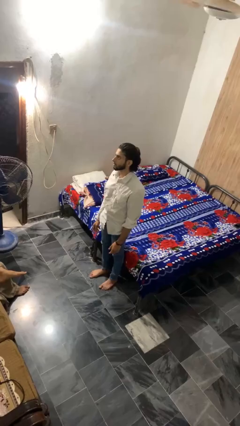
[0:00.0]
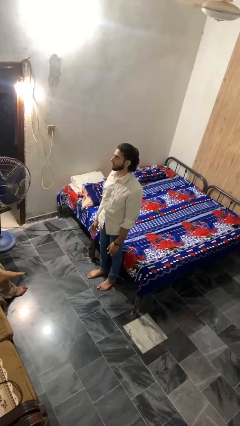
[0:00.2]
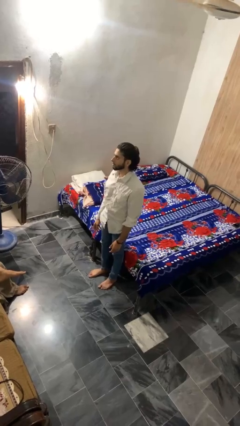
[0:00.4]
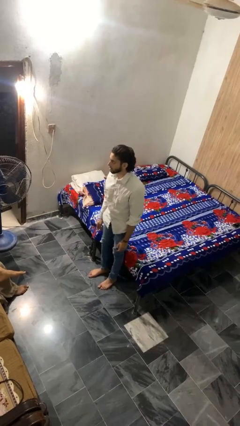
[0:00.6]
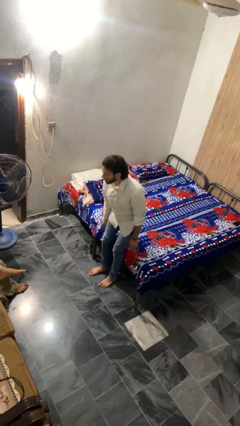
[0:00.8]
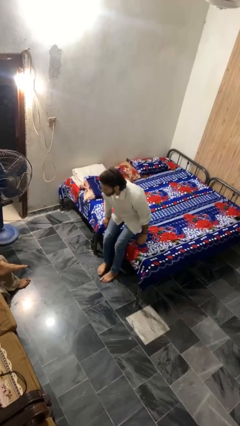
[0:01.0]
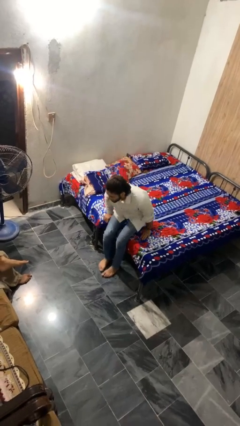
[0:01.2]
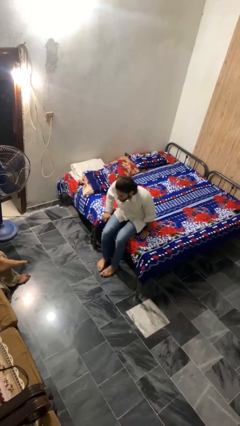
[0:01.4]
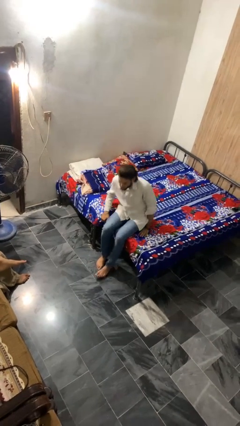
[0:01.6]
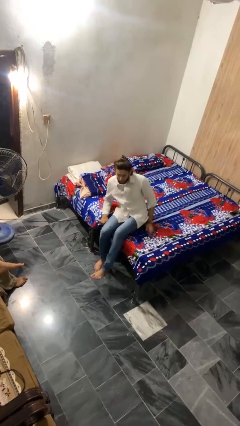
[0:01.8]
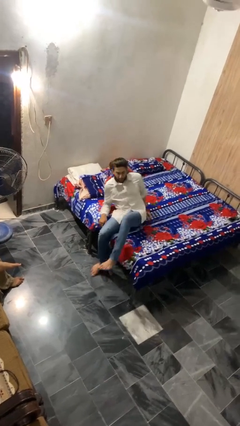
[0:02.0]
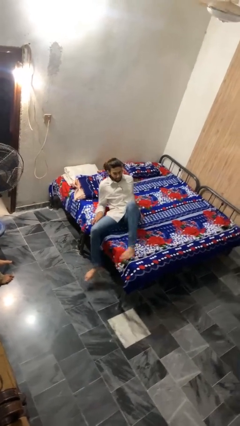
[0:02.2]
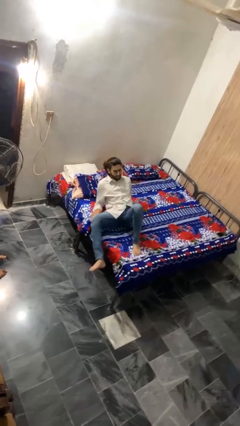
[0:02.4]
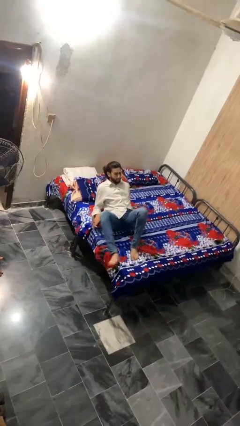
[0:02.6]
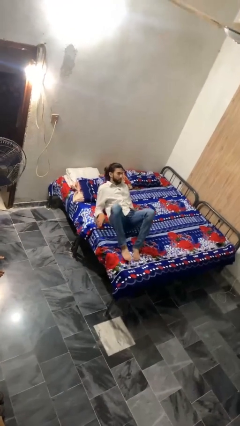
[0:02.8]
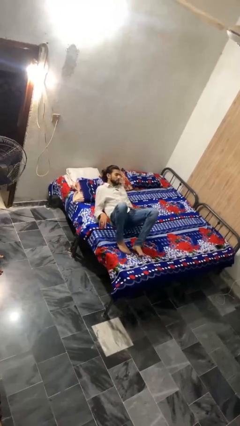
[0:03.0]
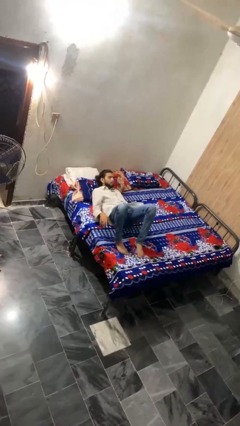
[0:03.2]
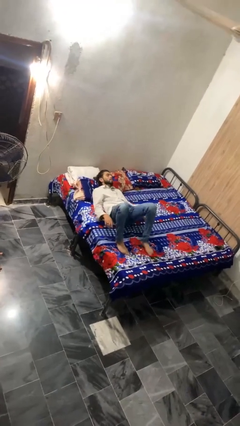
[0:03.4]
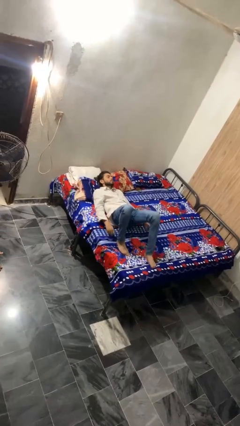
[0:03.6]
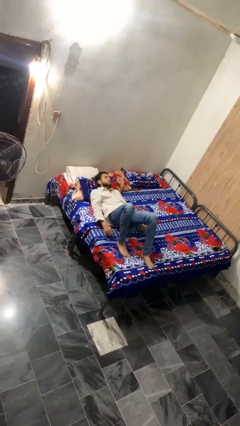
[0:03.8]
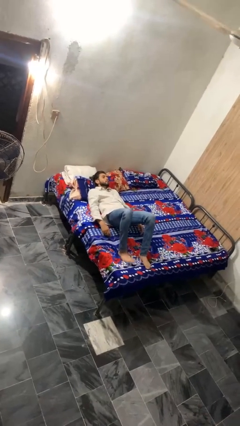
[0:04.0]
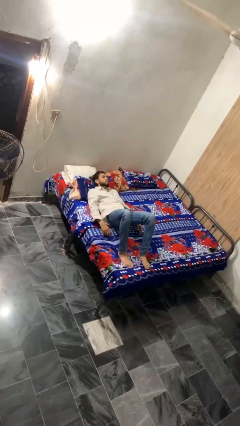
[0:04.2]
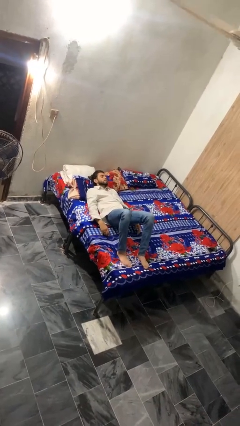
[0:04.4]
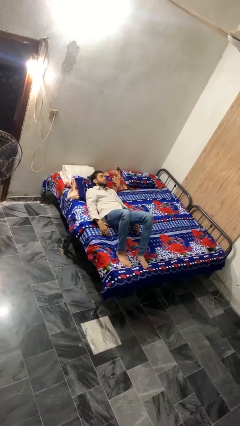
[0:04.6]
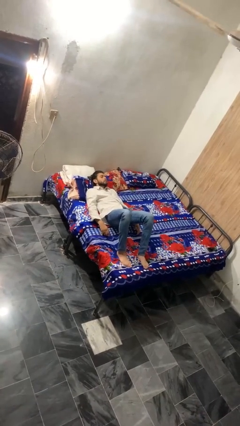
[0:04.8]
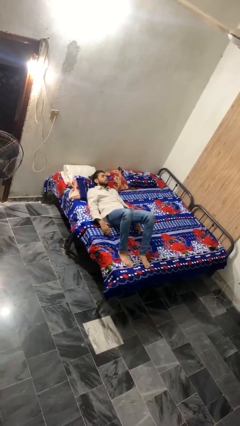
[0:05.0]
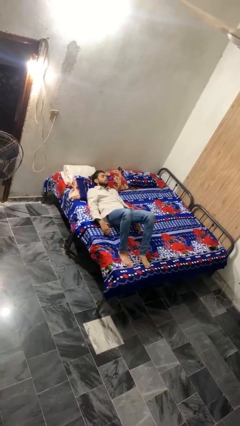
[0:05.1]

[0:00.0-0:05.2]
person lies down on bed

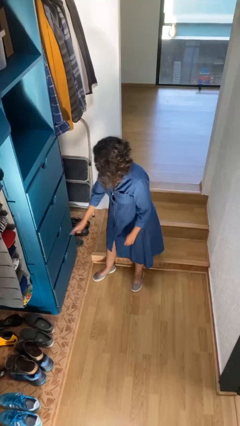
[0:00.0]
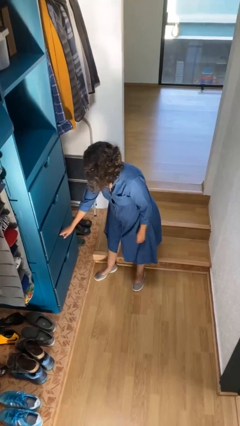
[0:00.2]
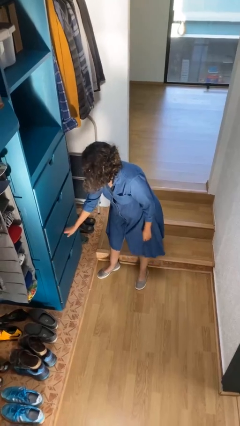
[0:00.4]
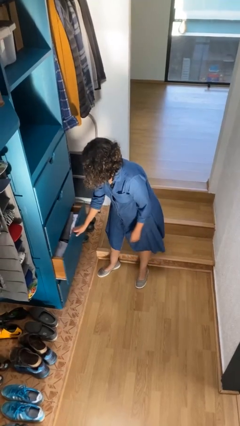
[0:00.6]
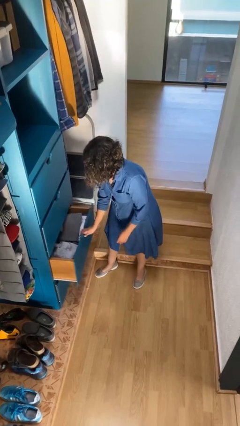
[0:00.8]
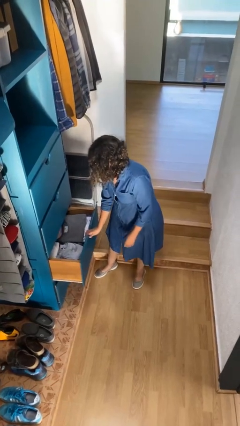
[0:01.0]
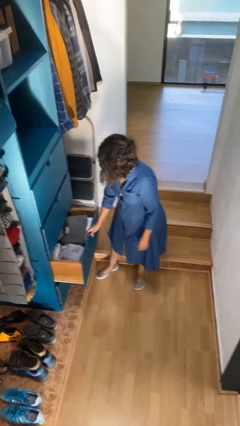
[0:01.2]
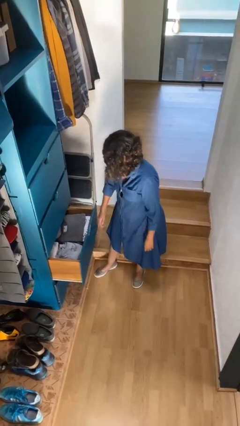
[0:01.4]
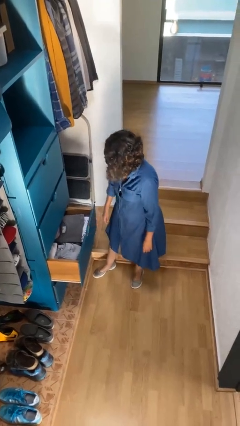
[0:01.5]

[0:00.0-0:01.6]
person opens dresser drawer

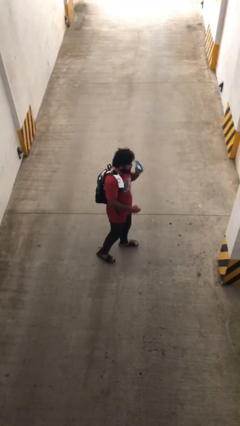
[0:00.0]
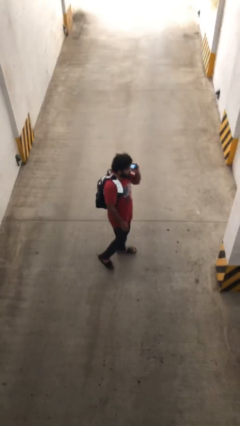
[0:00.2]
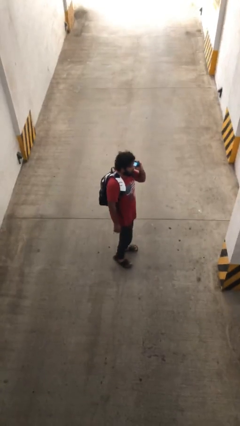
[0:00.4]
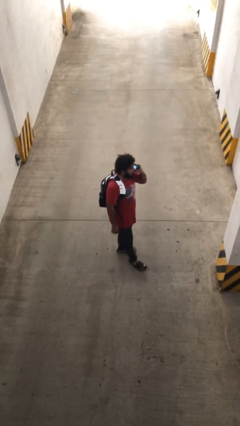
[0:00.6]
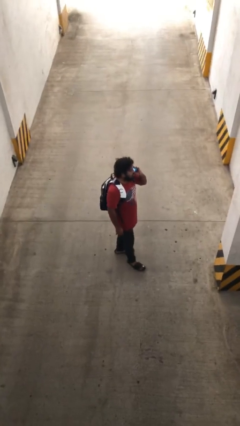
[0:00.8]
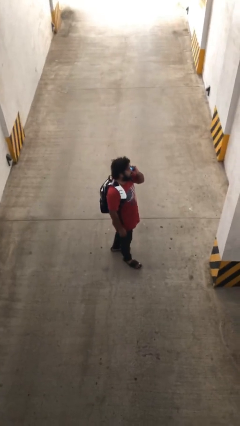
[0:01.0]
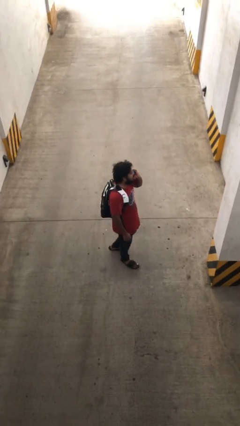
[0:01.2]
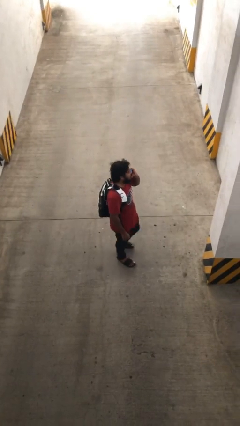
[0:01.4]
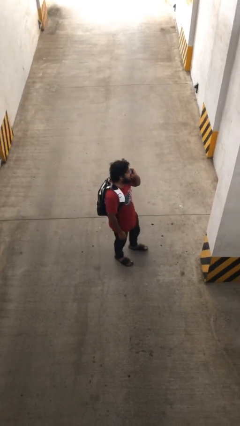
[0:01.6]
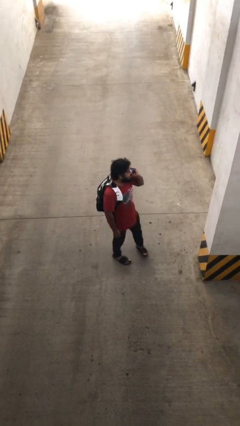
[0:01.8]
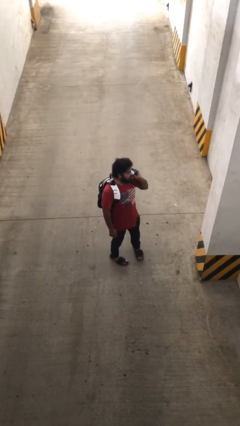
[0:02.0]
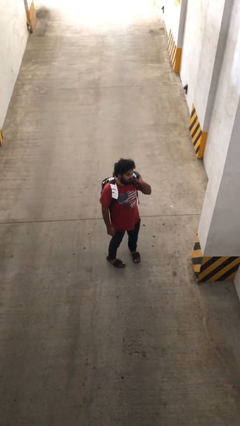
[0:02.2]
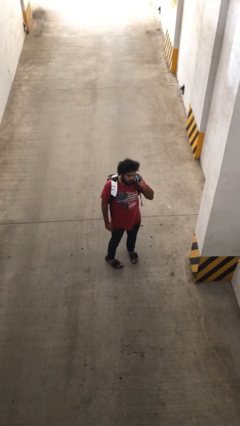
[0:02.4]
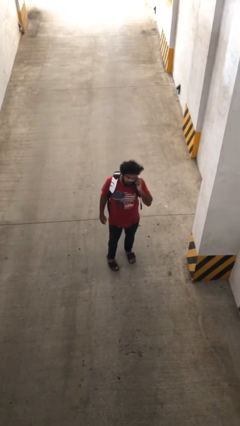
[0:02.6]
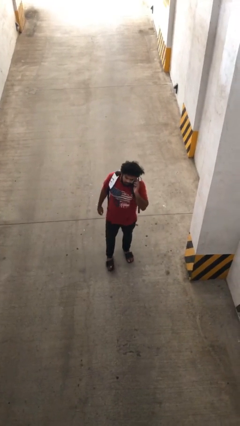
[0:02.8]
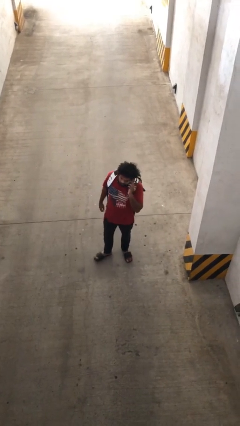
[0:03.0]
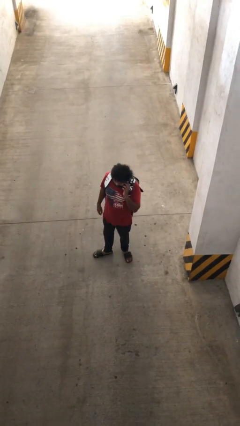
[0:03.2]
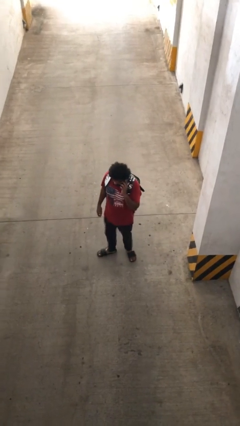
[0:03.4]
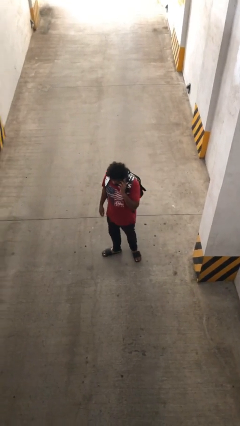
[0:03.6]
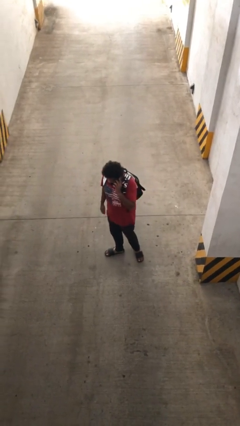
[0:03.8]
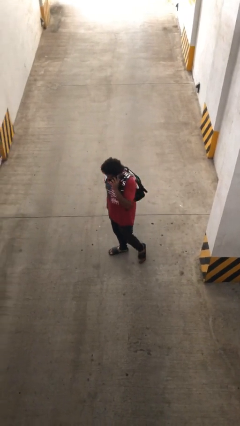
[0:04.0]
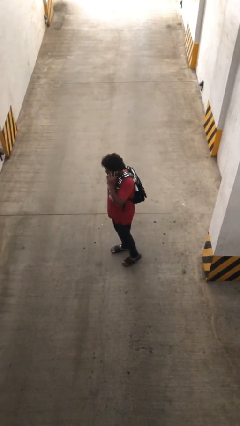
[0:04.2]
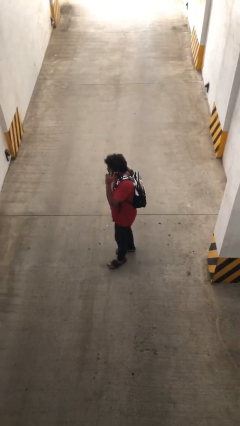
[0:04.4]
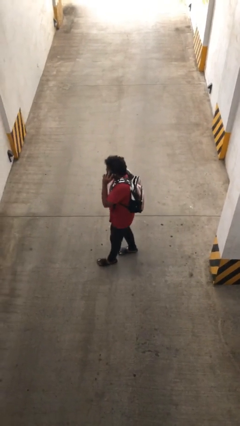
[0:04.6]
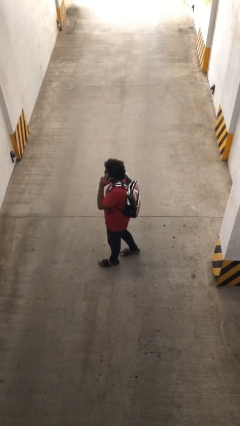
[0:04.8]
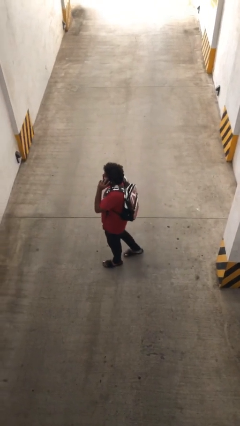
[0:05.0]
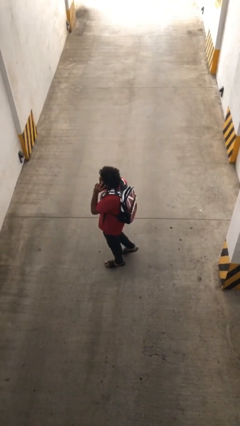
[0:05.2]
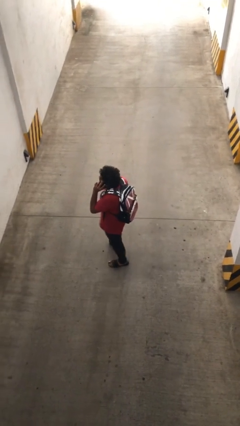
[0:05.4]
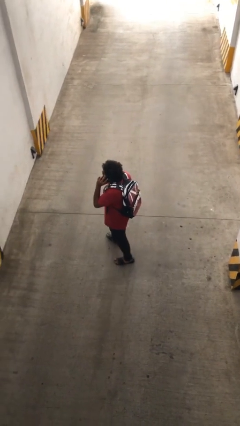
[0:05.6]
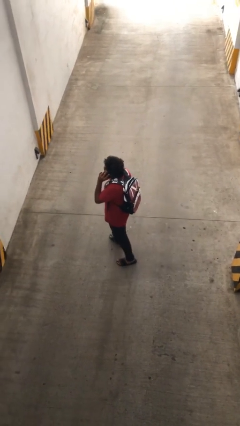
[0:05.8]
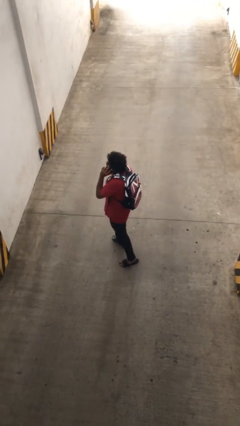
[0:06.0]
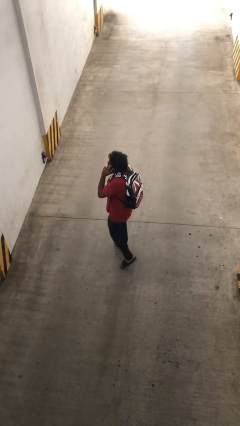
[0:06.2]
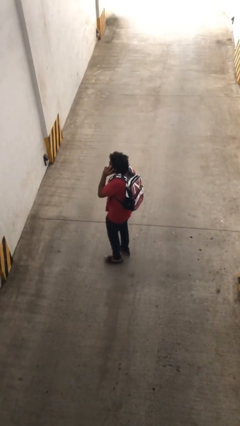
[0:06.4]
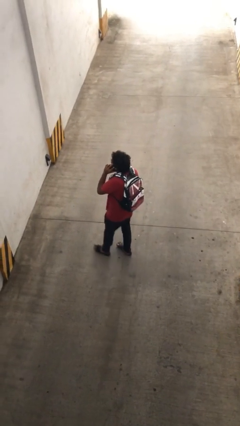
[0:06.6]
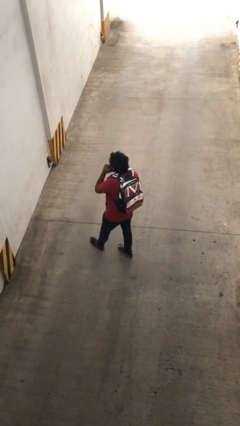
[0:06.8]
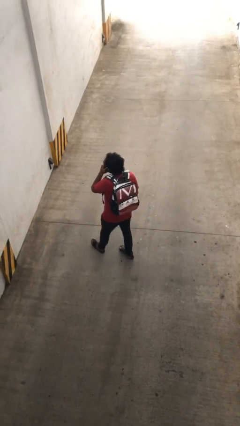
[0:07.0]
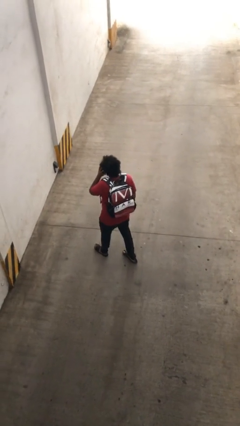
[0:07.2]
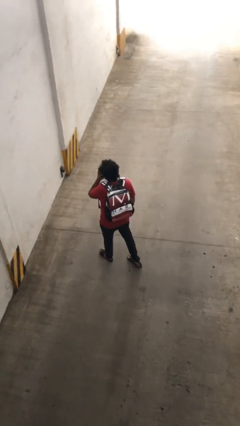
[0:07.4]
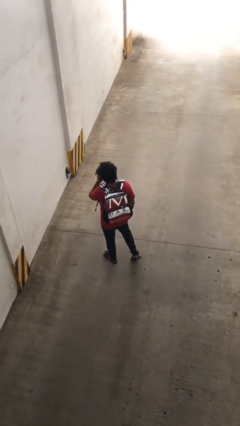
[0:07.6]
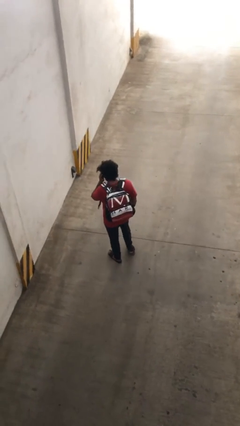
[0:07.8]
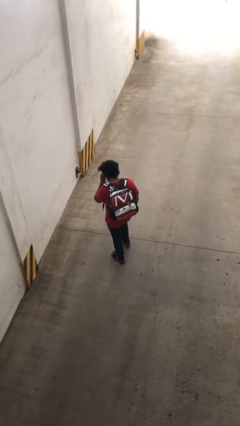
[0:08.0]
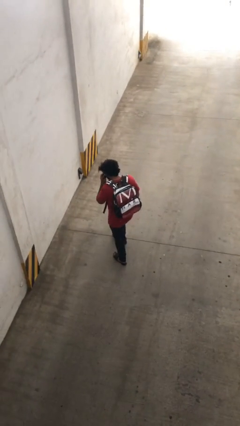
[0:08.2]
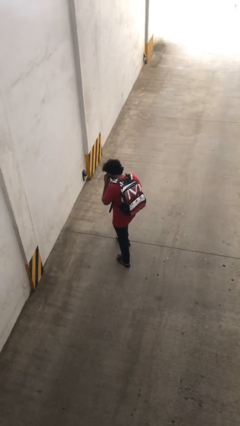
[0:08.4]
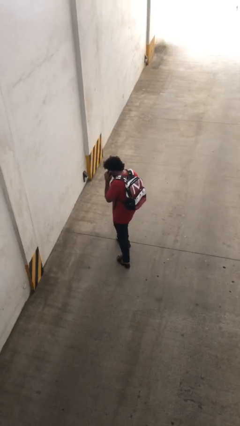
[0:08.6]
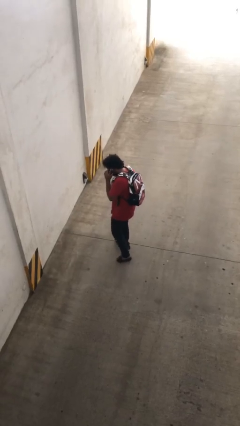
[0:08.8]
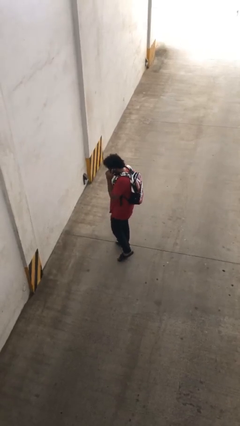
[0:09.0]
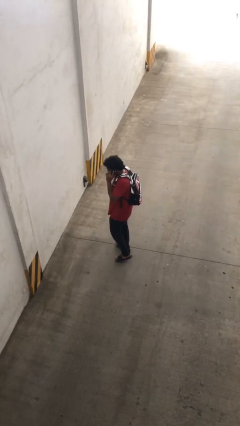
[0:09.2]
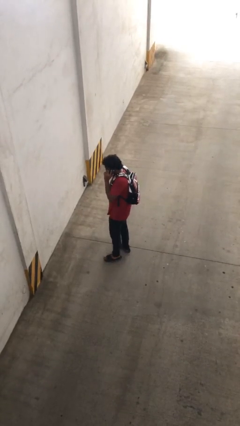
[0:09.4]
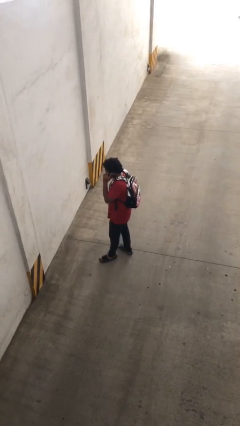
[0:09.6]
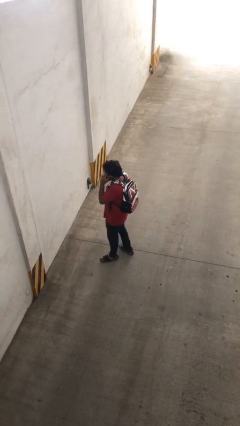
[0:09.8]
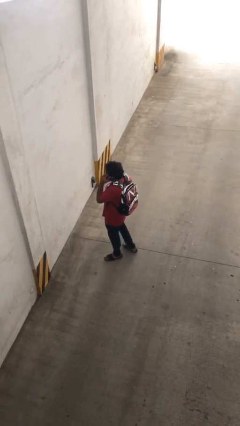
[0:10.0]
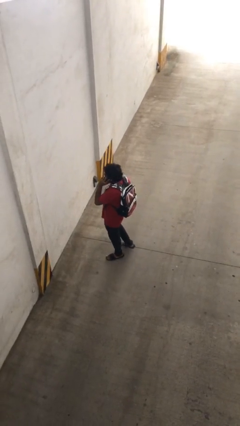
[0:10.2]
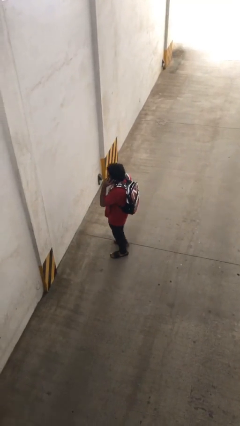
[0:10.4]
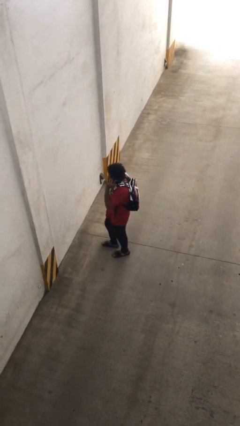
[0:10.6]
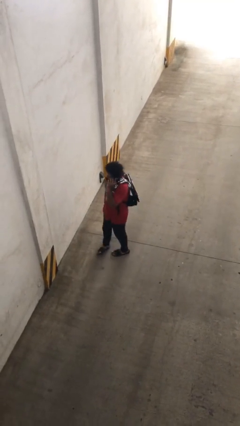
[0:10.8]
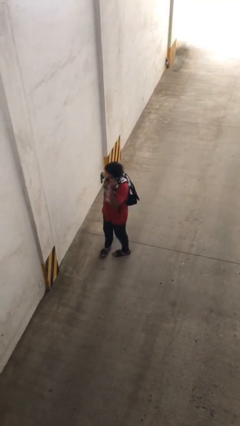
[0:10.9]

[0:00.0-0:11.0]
person talks on phone

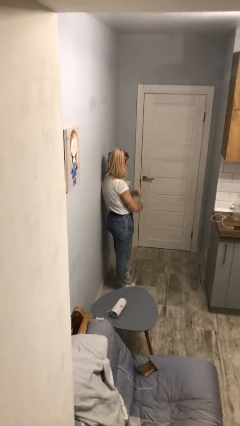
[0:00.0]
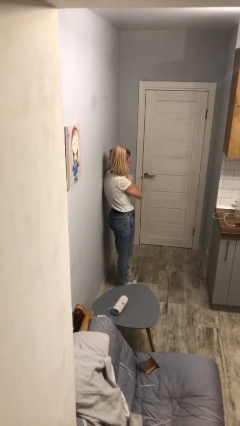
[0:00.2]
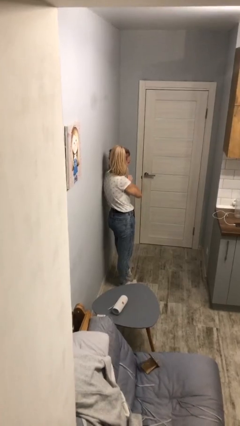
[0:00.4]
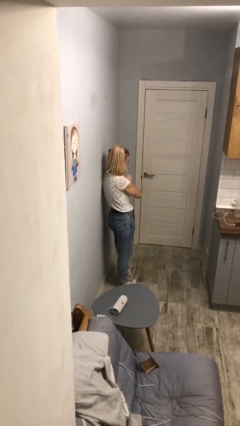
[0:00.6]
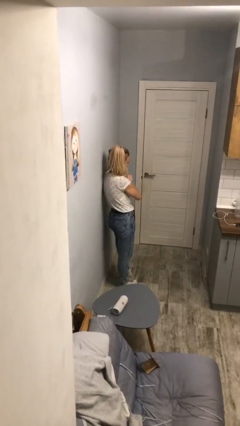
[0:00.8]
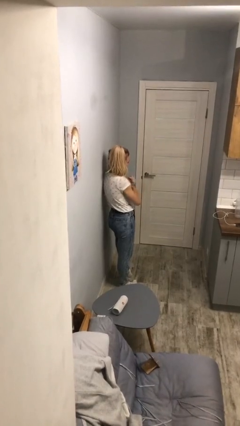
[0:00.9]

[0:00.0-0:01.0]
person crosses arms
